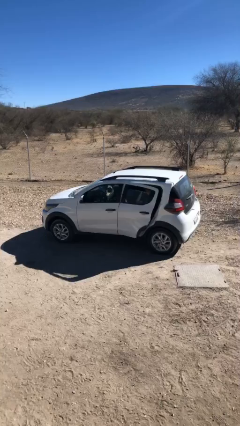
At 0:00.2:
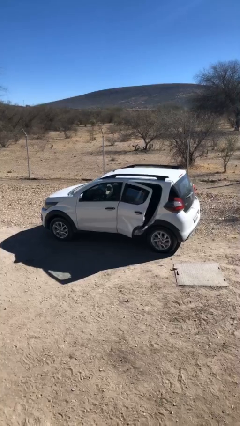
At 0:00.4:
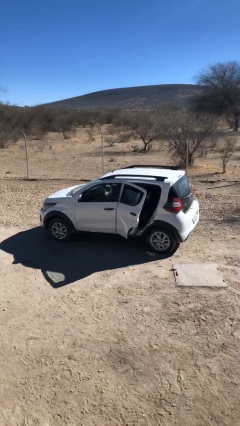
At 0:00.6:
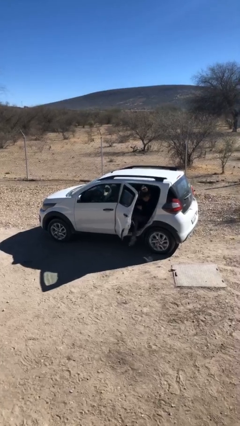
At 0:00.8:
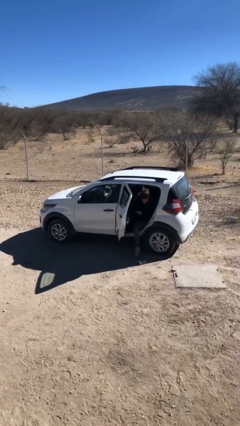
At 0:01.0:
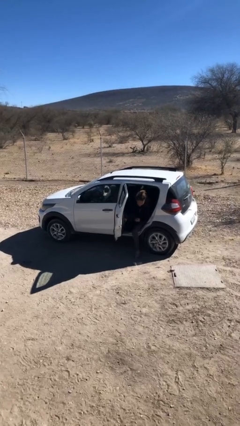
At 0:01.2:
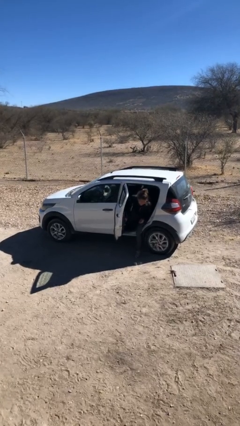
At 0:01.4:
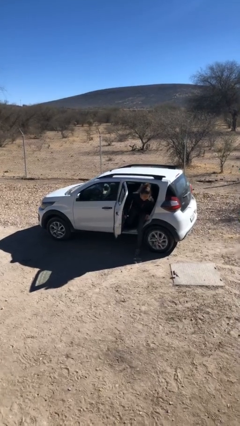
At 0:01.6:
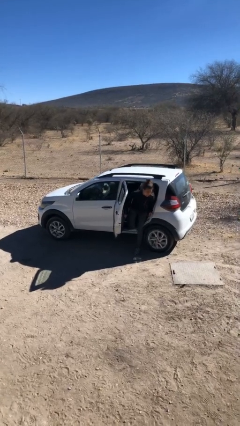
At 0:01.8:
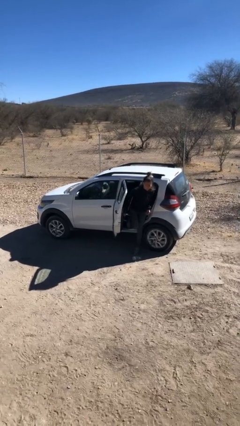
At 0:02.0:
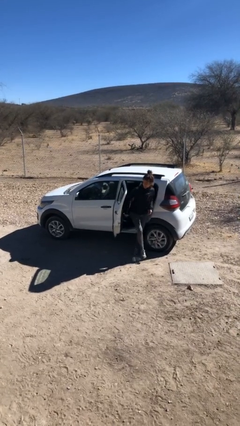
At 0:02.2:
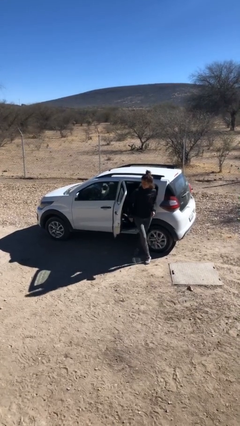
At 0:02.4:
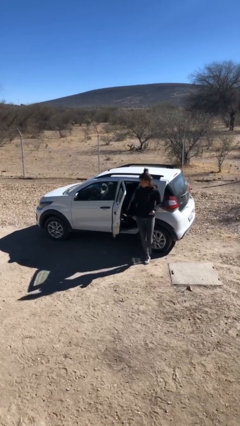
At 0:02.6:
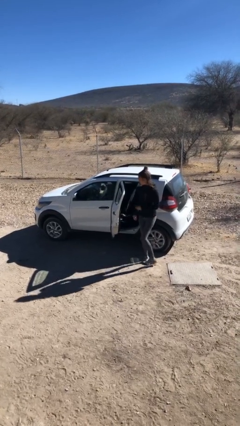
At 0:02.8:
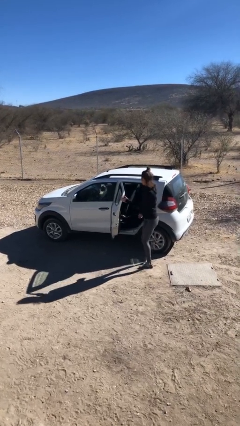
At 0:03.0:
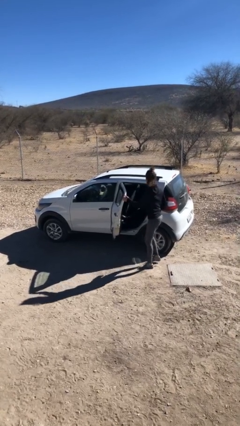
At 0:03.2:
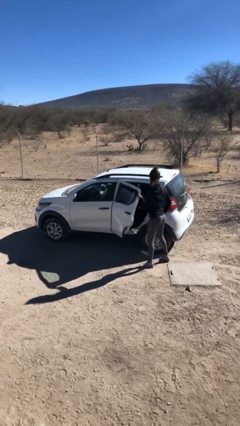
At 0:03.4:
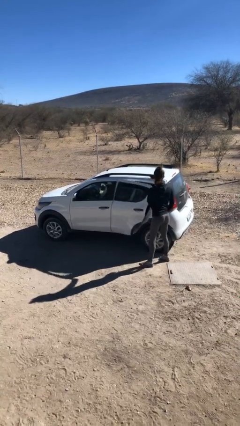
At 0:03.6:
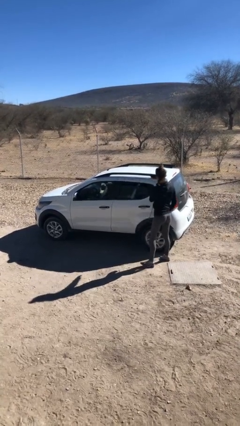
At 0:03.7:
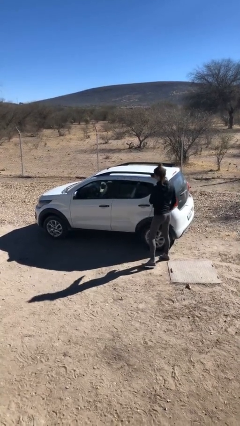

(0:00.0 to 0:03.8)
car drops off person

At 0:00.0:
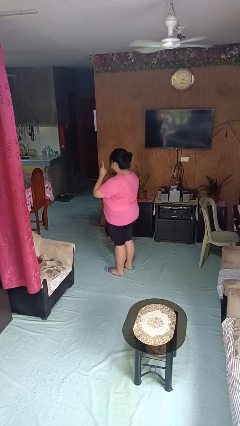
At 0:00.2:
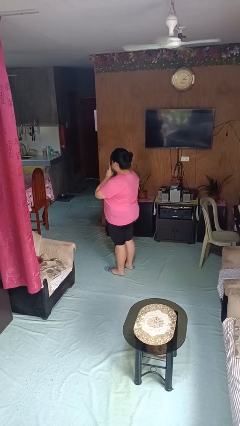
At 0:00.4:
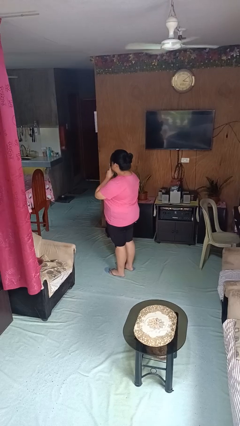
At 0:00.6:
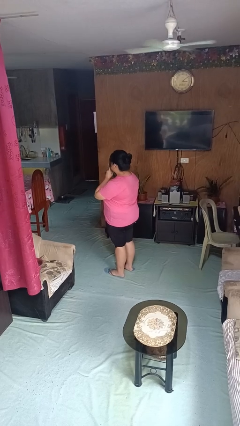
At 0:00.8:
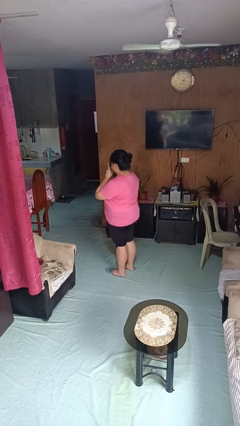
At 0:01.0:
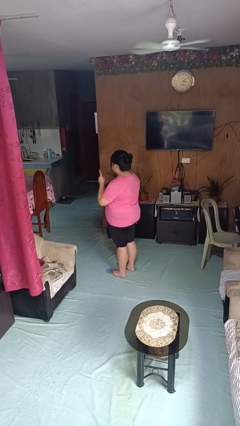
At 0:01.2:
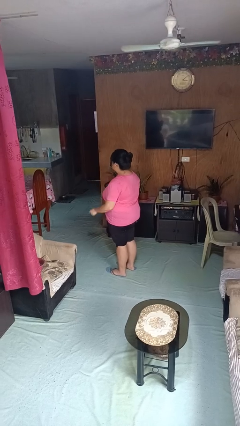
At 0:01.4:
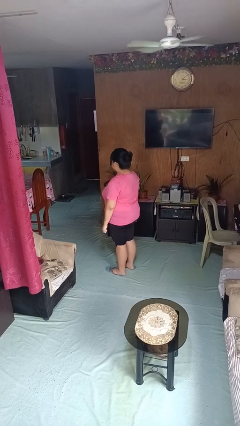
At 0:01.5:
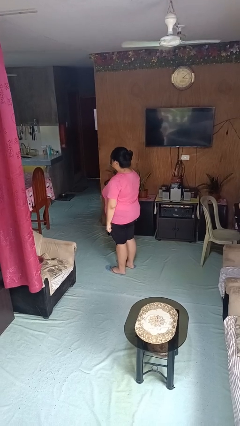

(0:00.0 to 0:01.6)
person gestures be quiet

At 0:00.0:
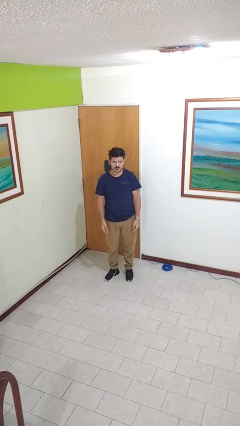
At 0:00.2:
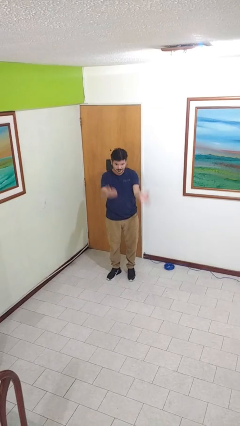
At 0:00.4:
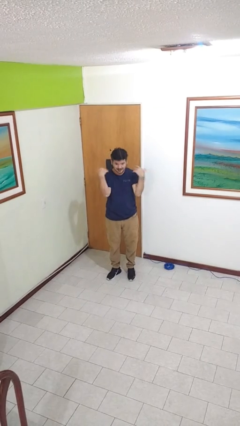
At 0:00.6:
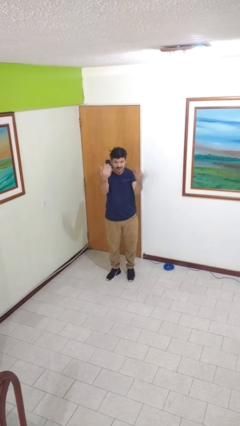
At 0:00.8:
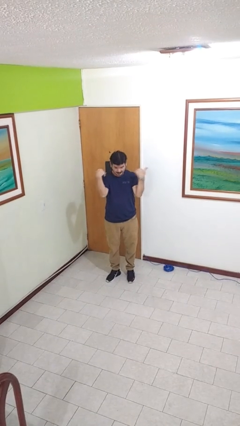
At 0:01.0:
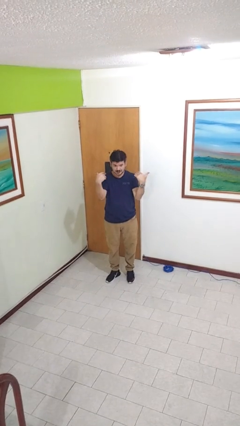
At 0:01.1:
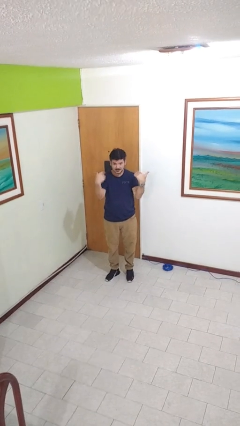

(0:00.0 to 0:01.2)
person gestures come here

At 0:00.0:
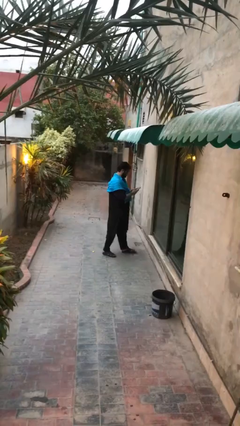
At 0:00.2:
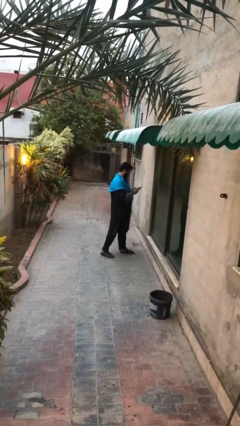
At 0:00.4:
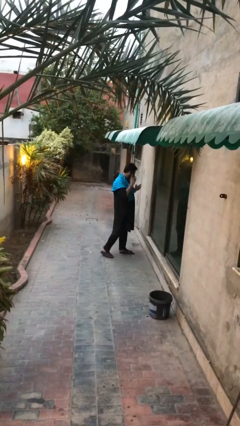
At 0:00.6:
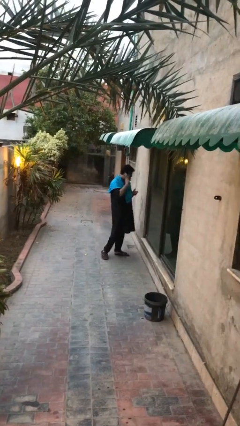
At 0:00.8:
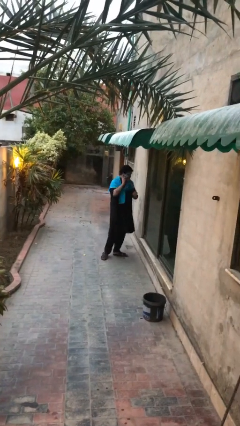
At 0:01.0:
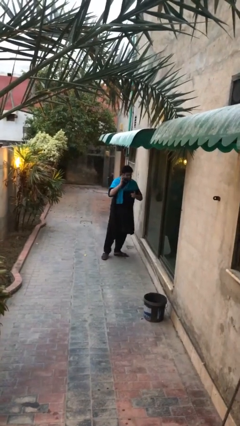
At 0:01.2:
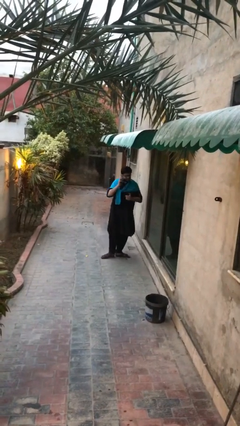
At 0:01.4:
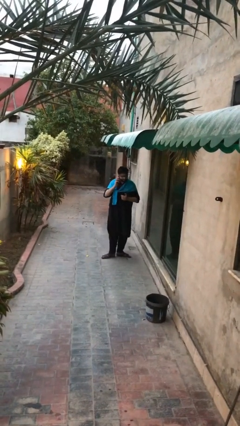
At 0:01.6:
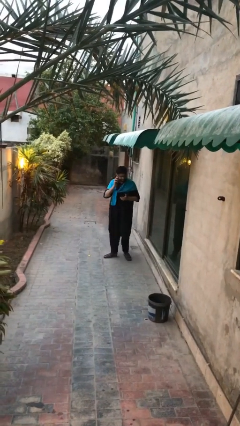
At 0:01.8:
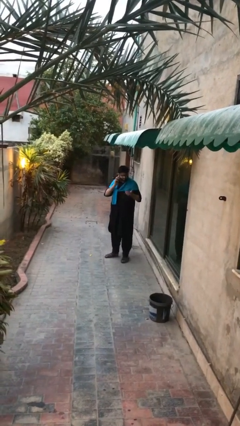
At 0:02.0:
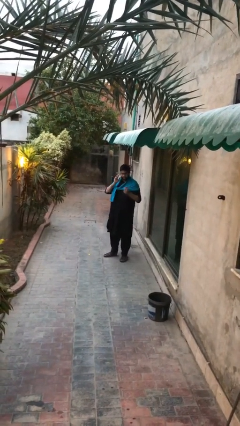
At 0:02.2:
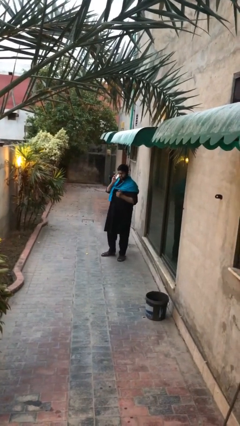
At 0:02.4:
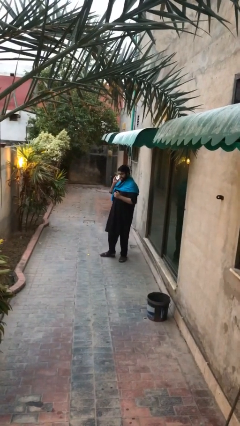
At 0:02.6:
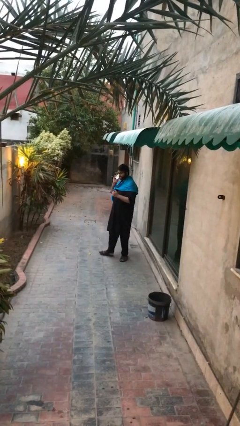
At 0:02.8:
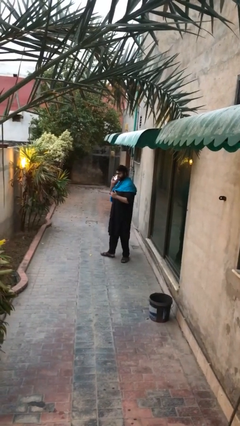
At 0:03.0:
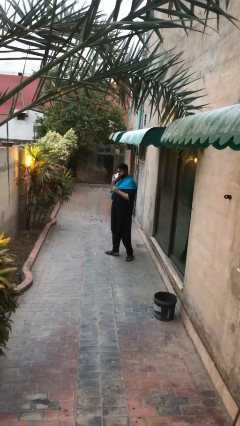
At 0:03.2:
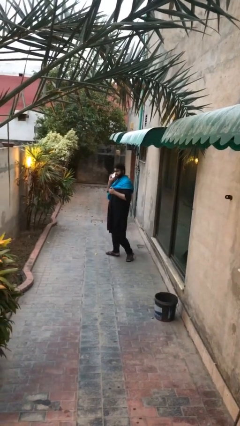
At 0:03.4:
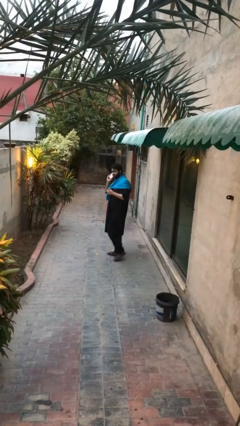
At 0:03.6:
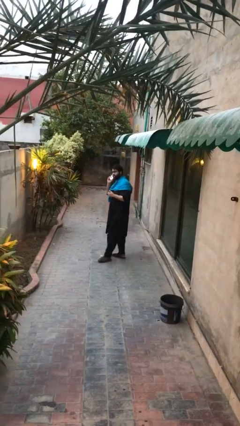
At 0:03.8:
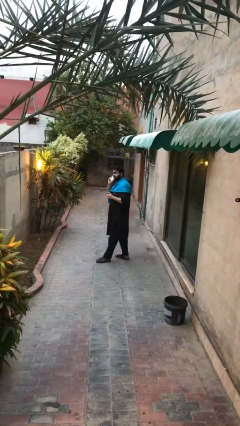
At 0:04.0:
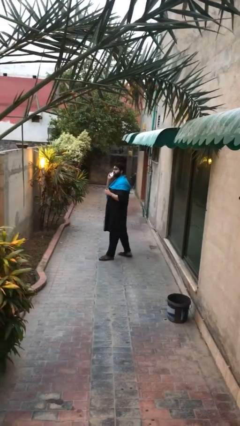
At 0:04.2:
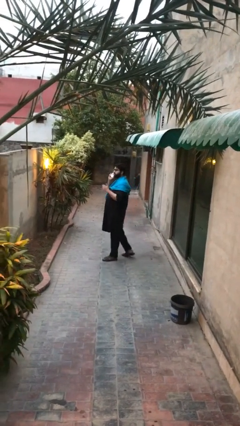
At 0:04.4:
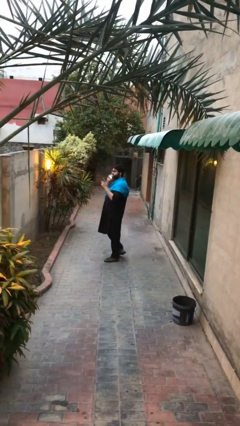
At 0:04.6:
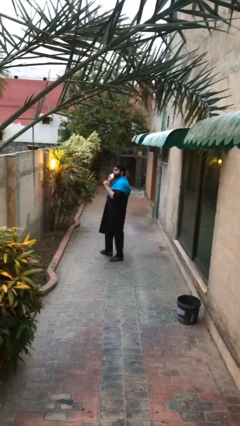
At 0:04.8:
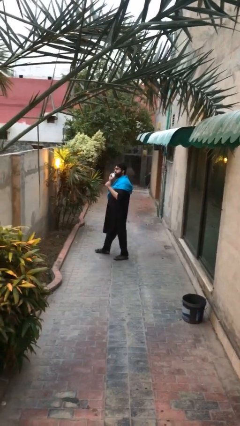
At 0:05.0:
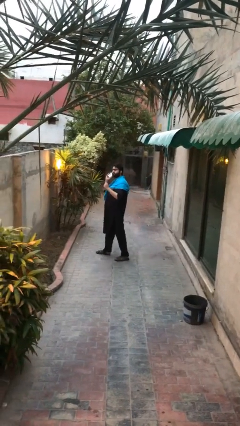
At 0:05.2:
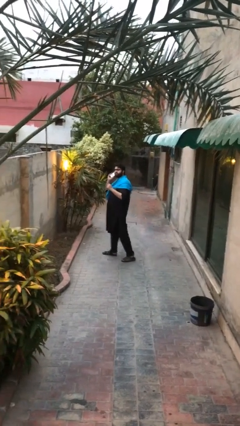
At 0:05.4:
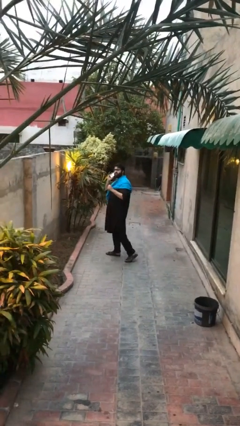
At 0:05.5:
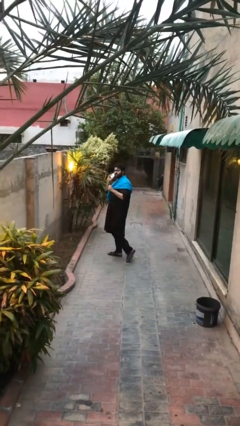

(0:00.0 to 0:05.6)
person talks on phone

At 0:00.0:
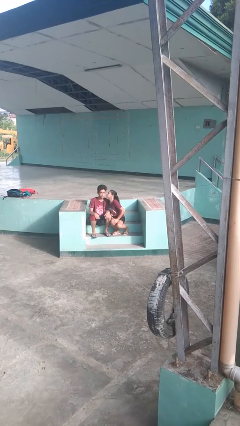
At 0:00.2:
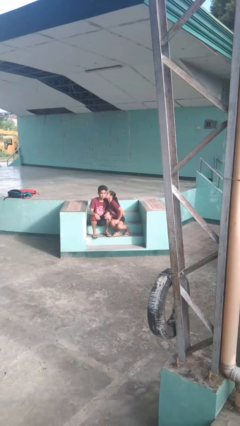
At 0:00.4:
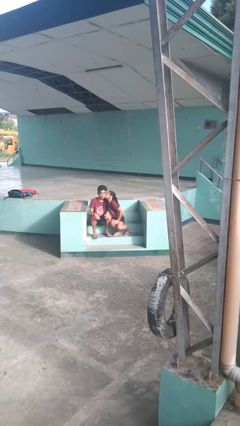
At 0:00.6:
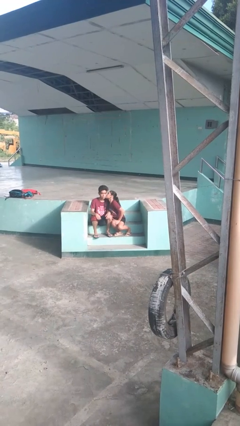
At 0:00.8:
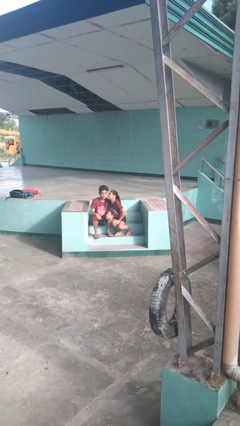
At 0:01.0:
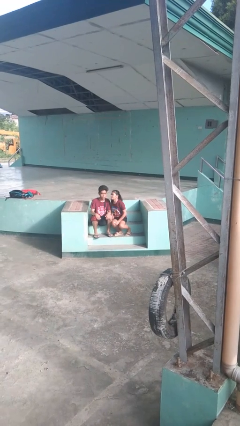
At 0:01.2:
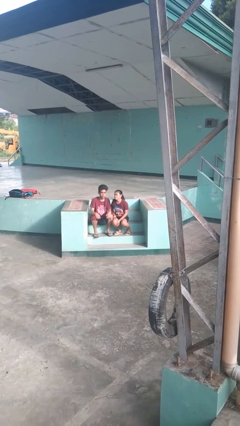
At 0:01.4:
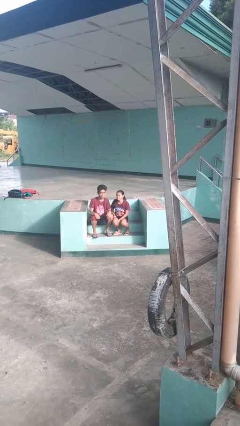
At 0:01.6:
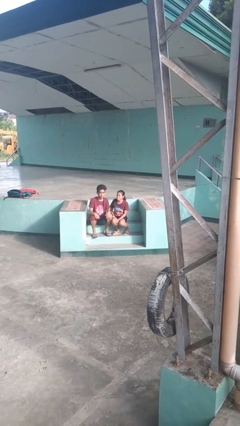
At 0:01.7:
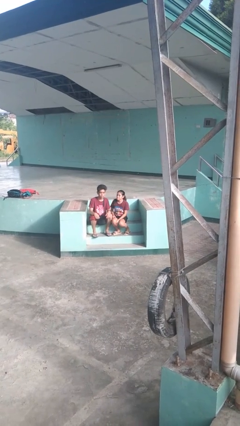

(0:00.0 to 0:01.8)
person kisses cheek of person

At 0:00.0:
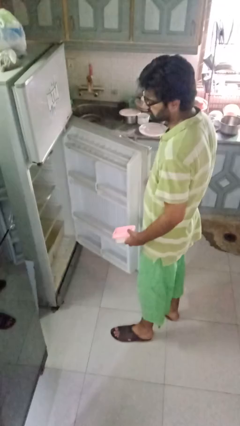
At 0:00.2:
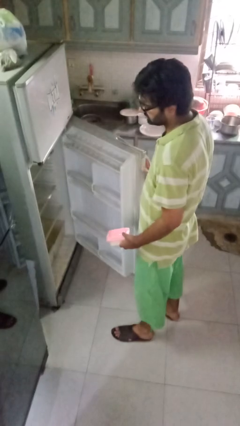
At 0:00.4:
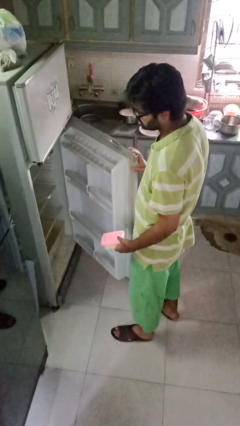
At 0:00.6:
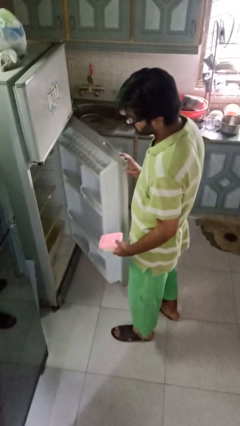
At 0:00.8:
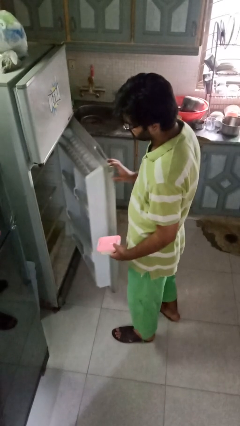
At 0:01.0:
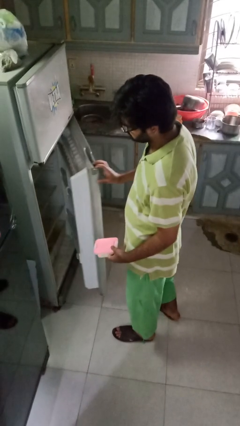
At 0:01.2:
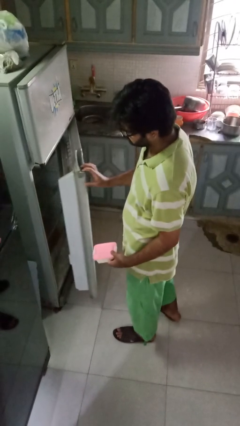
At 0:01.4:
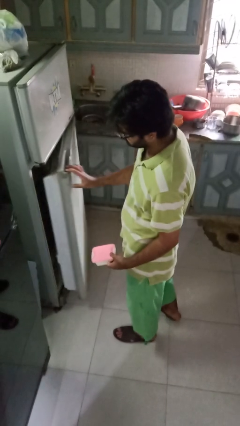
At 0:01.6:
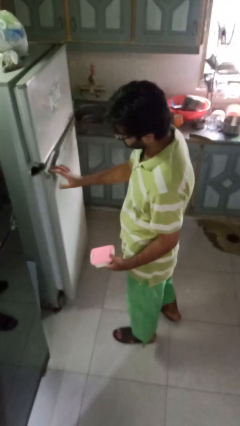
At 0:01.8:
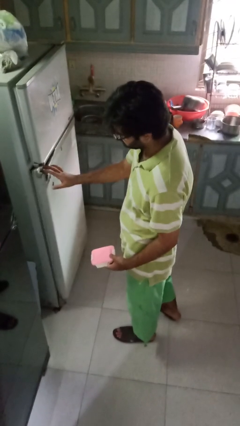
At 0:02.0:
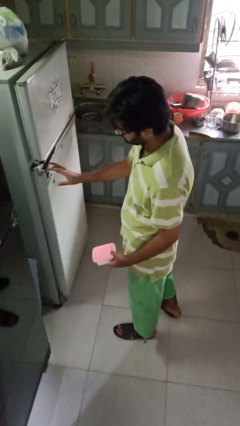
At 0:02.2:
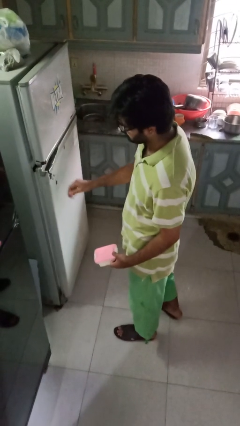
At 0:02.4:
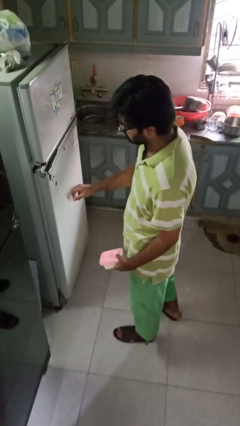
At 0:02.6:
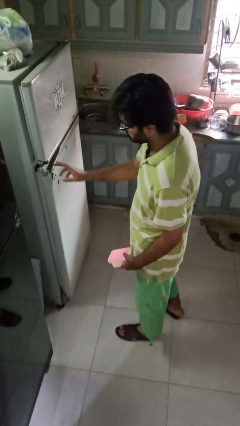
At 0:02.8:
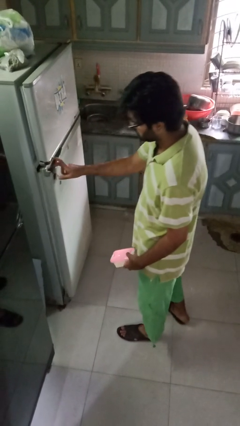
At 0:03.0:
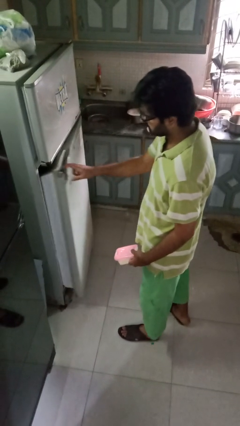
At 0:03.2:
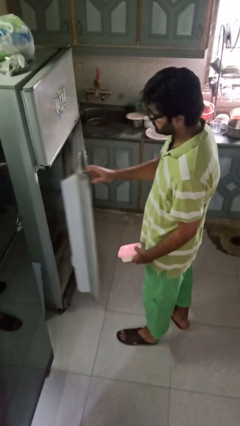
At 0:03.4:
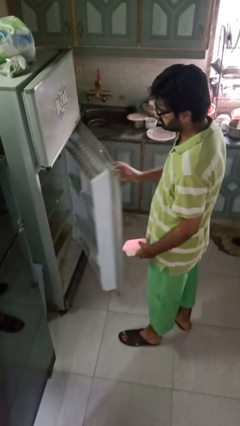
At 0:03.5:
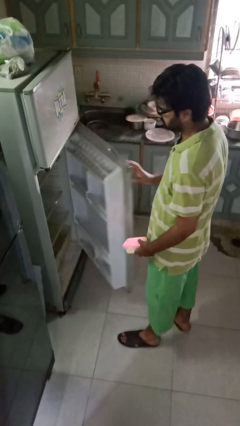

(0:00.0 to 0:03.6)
person opens refrigerator
